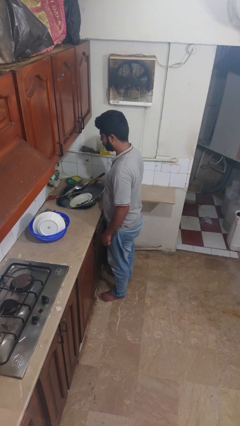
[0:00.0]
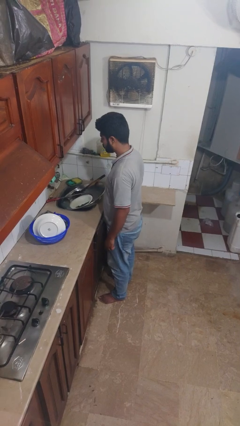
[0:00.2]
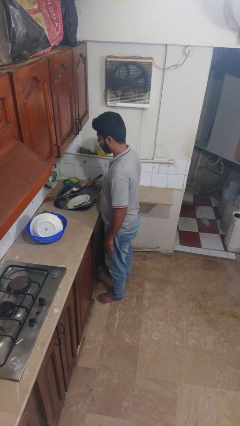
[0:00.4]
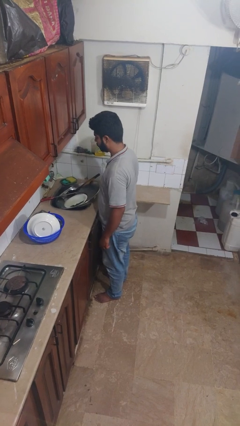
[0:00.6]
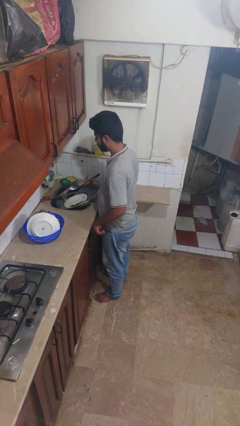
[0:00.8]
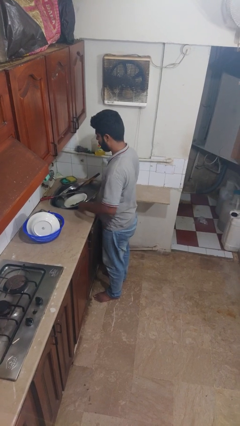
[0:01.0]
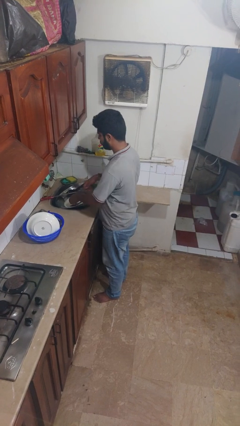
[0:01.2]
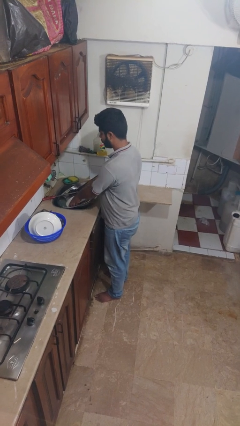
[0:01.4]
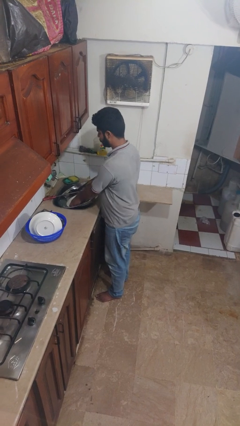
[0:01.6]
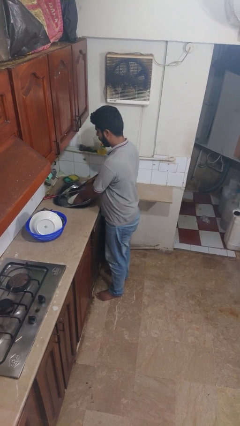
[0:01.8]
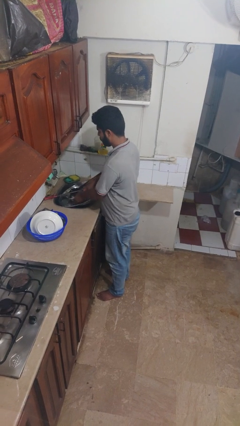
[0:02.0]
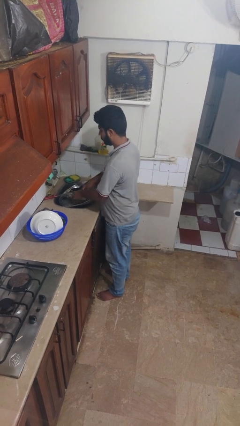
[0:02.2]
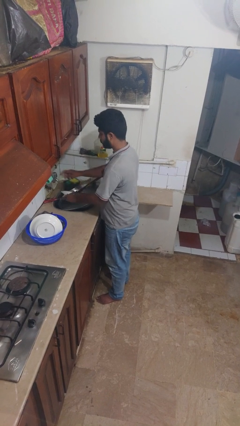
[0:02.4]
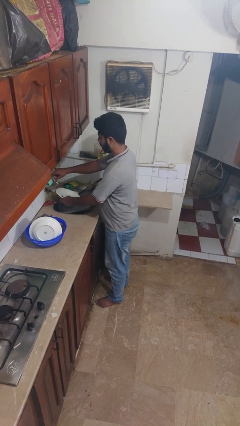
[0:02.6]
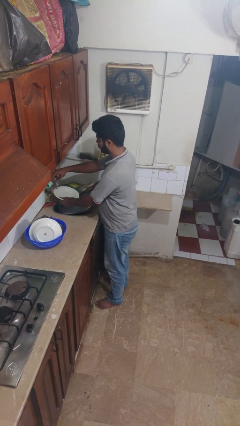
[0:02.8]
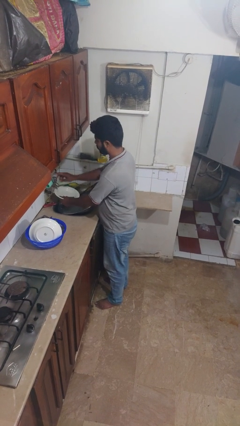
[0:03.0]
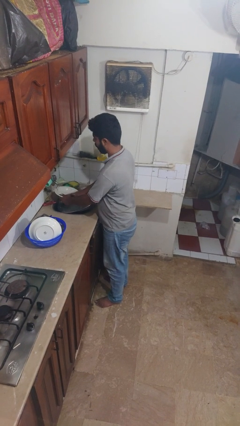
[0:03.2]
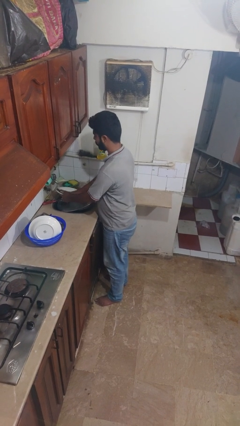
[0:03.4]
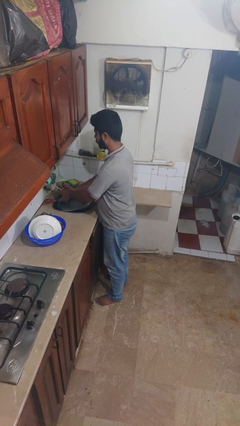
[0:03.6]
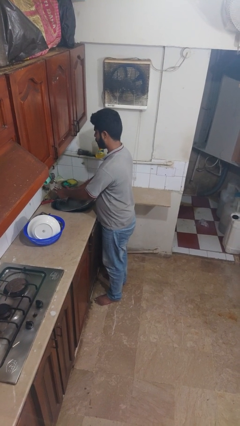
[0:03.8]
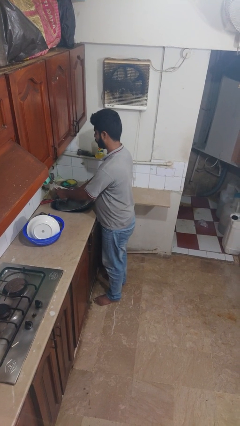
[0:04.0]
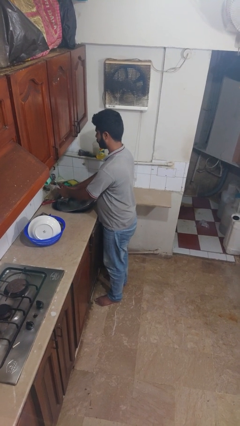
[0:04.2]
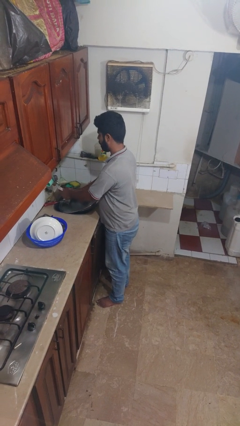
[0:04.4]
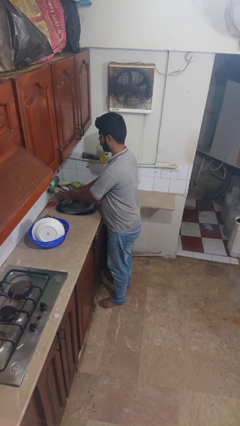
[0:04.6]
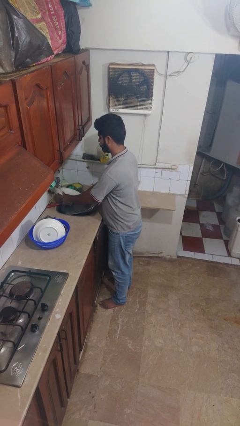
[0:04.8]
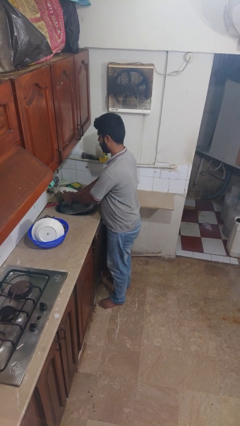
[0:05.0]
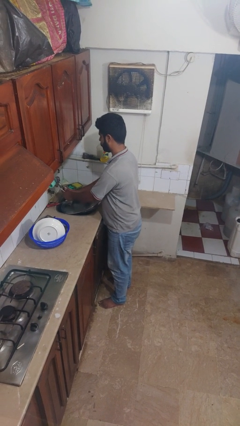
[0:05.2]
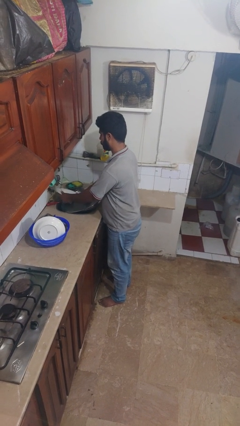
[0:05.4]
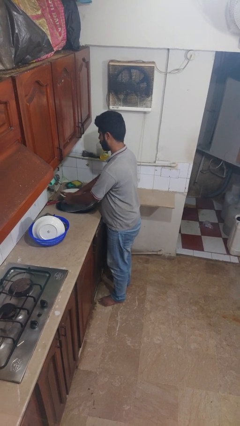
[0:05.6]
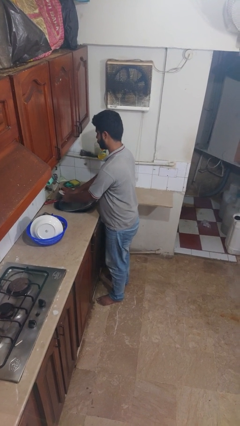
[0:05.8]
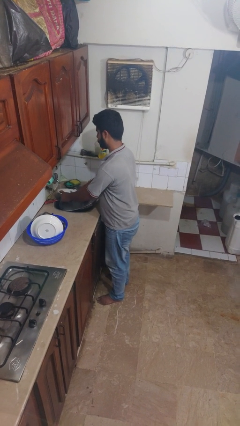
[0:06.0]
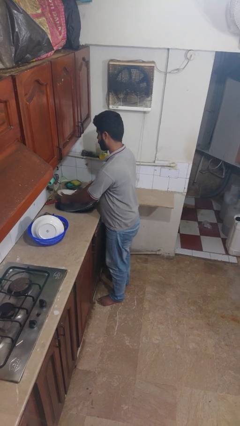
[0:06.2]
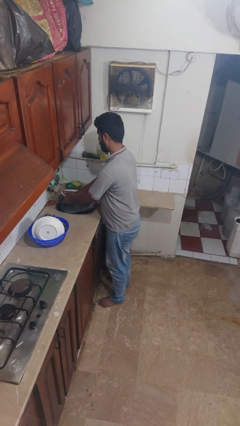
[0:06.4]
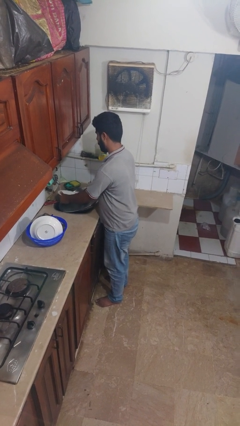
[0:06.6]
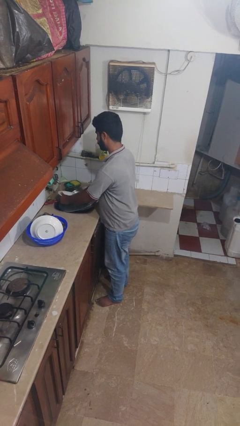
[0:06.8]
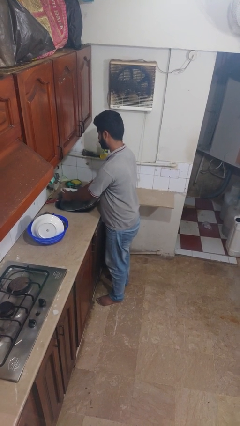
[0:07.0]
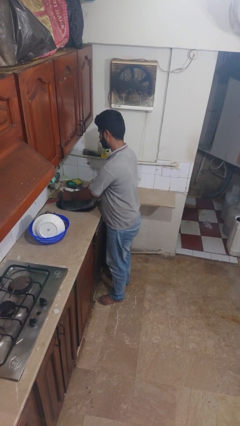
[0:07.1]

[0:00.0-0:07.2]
person washes dish

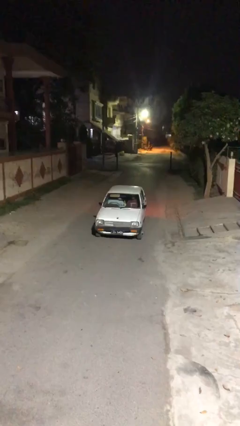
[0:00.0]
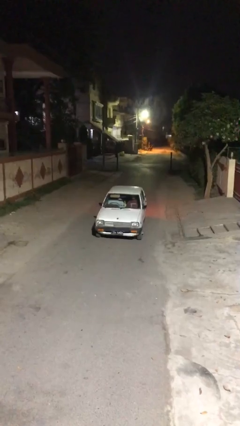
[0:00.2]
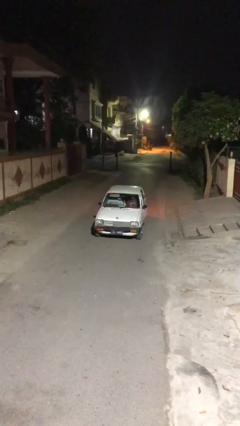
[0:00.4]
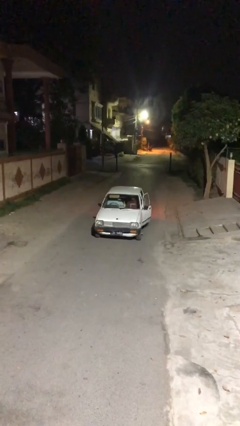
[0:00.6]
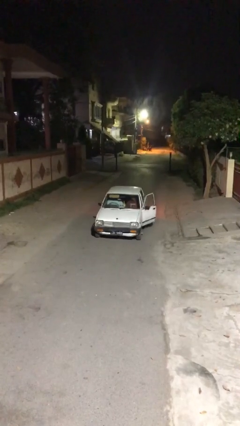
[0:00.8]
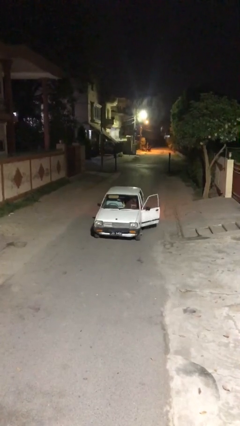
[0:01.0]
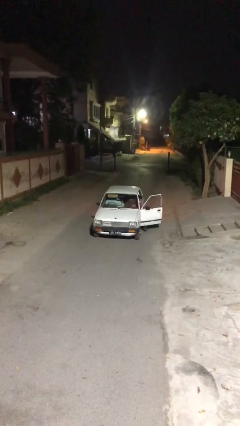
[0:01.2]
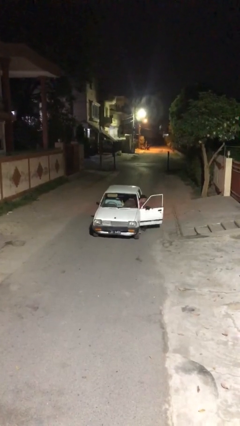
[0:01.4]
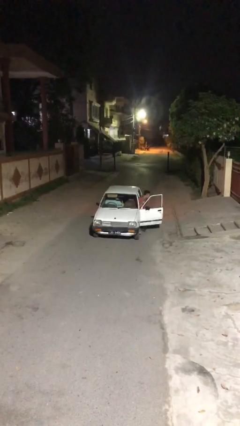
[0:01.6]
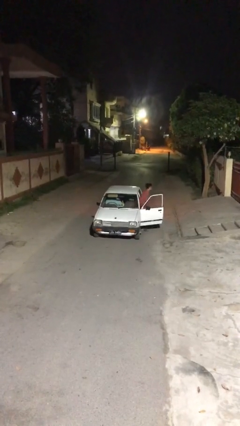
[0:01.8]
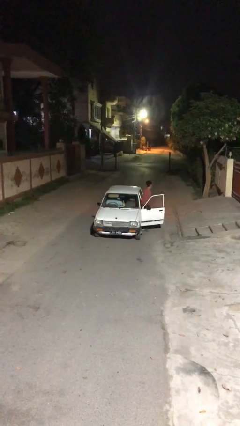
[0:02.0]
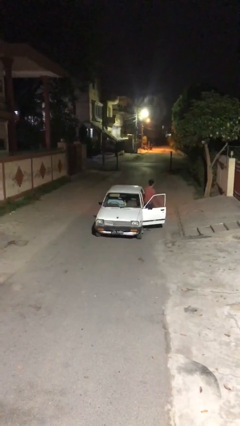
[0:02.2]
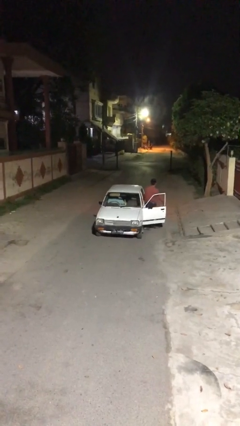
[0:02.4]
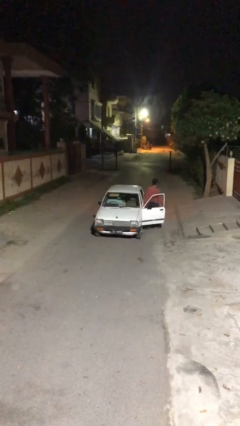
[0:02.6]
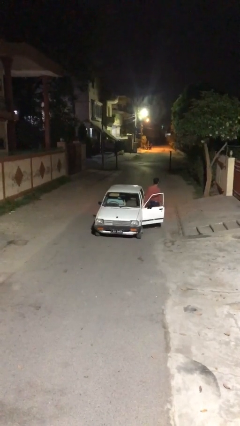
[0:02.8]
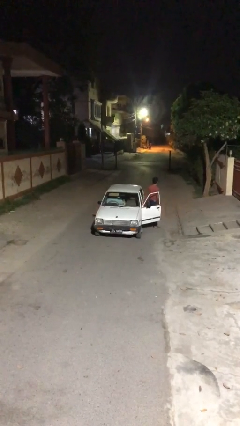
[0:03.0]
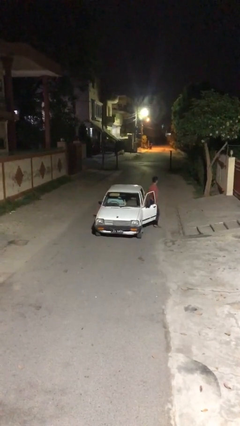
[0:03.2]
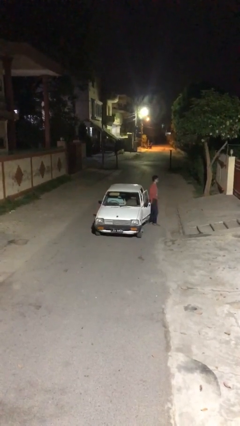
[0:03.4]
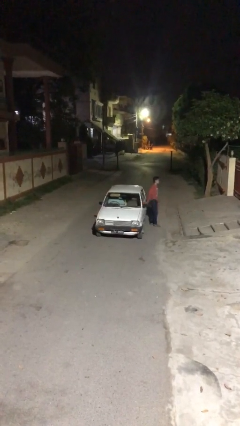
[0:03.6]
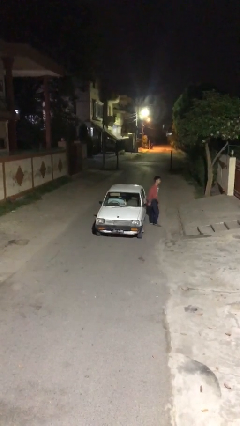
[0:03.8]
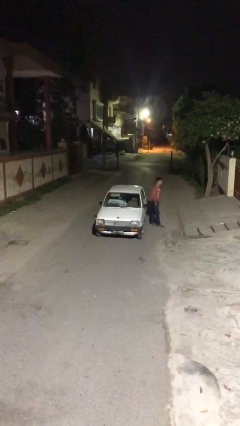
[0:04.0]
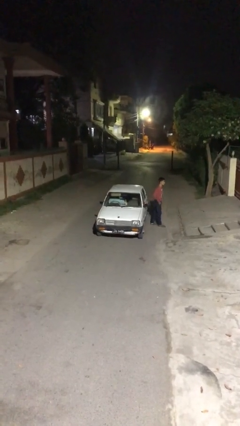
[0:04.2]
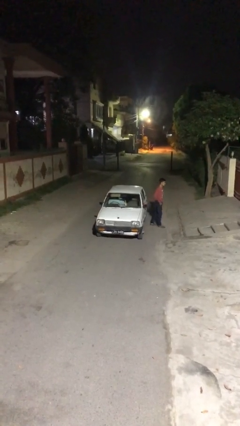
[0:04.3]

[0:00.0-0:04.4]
car drops off person

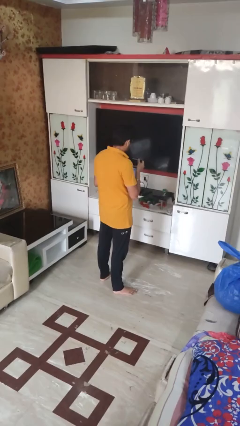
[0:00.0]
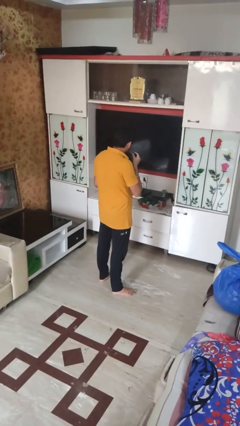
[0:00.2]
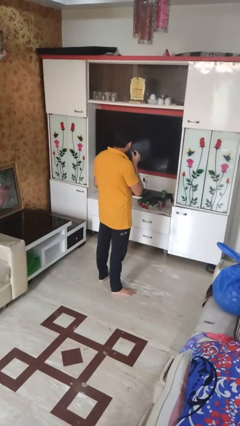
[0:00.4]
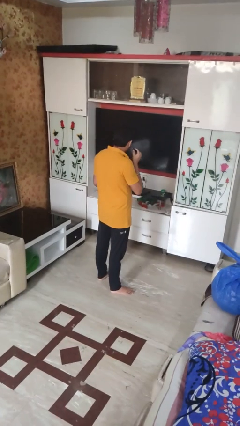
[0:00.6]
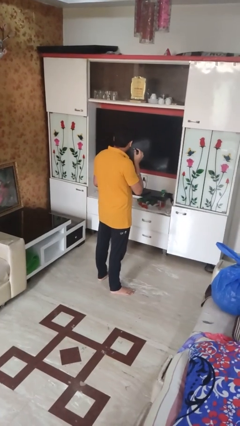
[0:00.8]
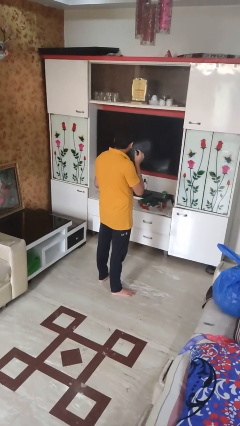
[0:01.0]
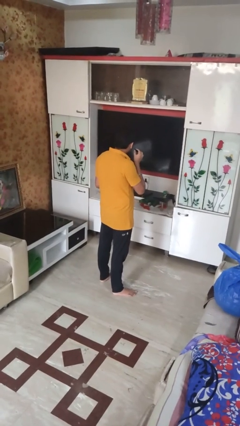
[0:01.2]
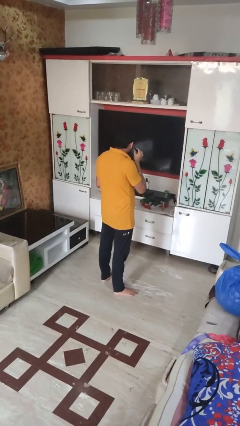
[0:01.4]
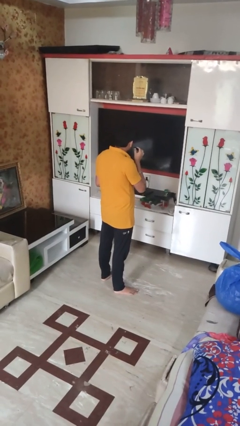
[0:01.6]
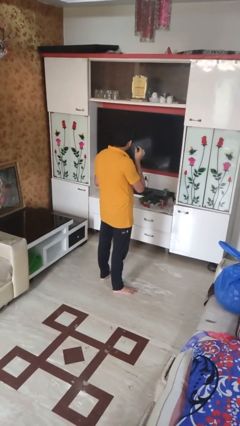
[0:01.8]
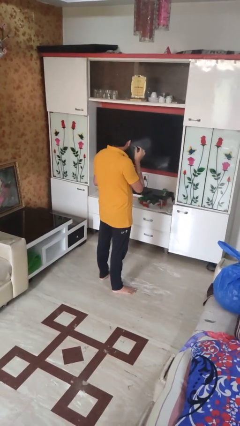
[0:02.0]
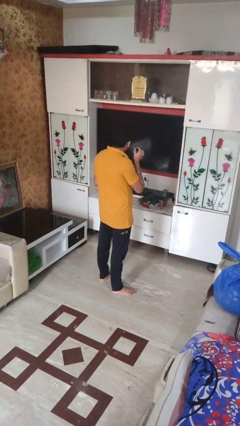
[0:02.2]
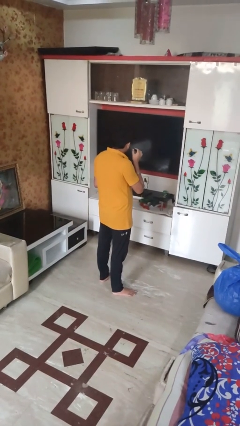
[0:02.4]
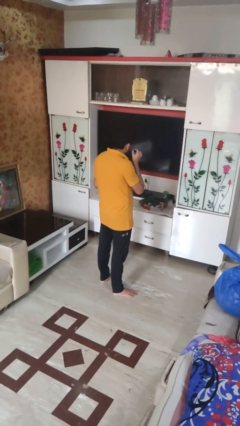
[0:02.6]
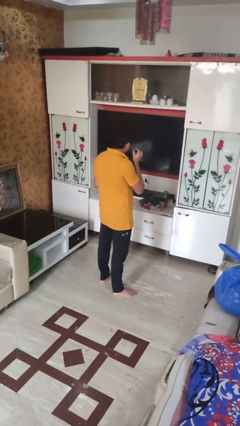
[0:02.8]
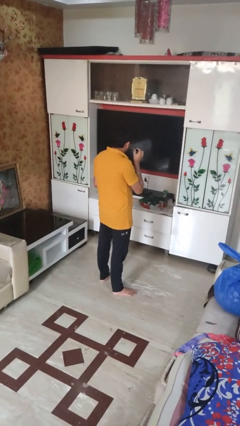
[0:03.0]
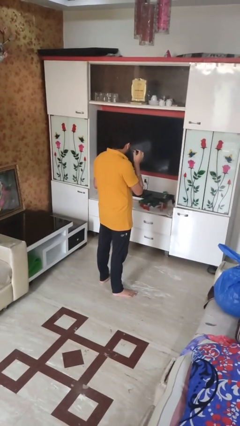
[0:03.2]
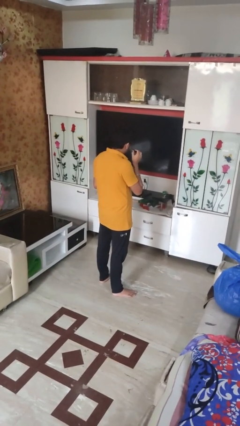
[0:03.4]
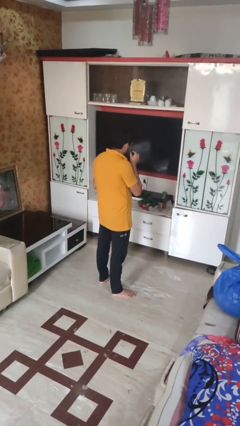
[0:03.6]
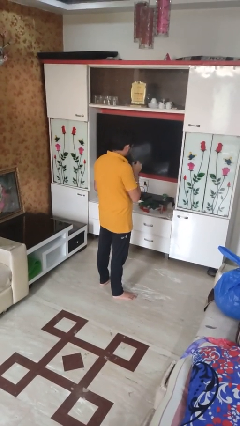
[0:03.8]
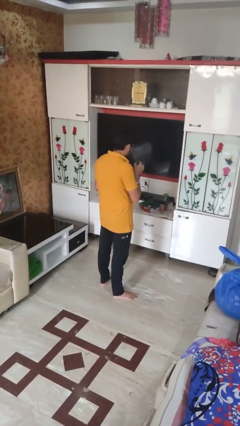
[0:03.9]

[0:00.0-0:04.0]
person applies lip makeup

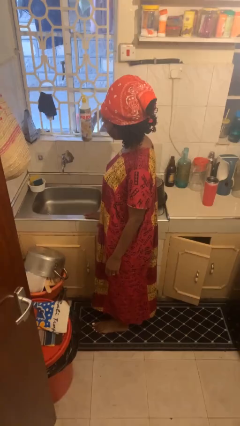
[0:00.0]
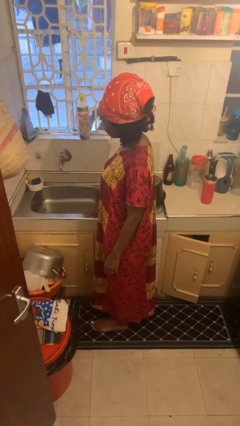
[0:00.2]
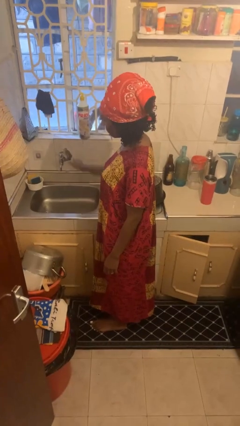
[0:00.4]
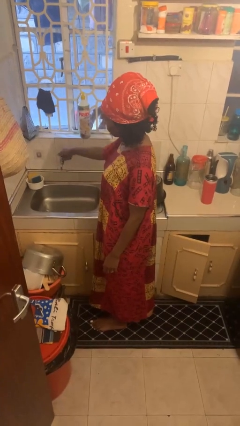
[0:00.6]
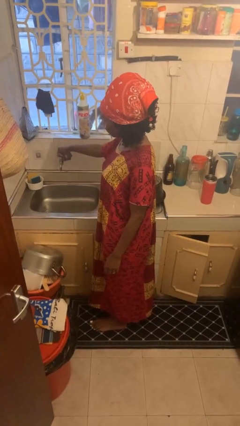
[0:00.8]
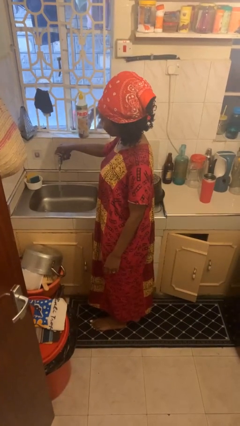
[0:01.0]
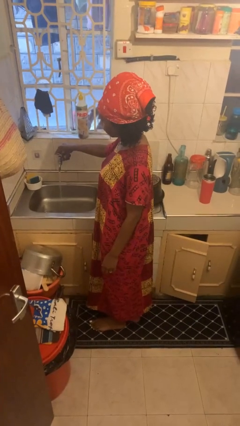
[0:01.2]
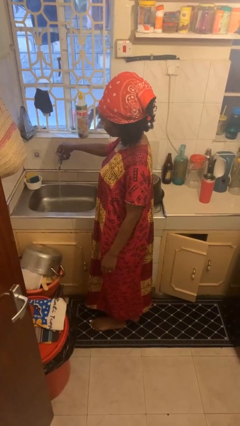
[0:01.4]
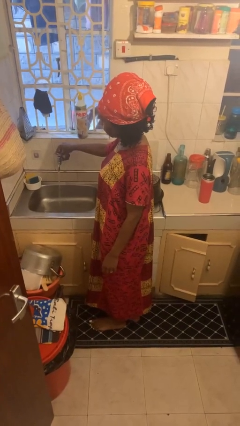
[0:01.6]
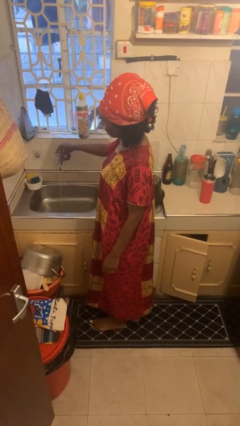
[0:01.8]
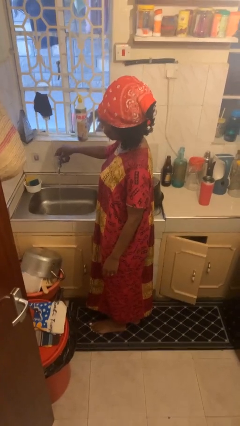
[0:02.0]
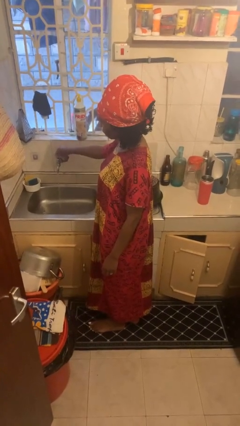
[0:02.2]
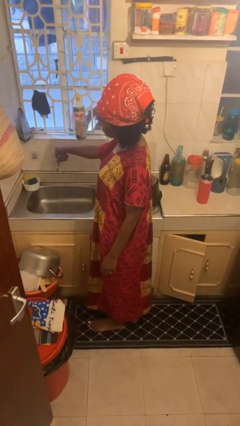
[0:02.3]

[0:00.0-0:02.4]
person turns on faucet
